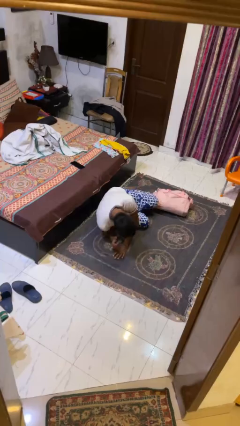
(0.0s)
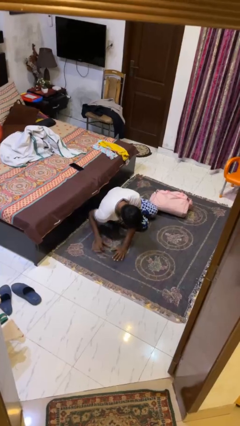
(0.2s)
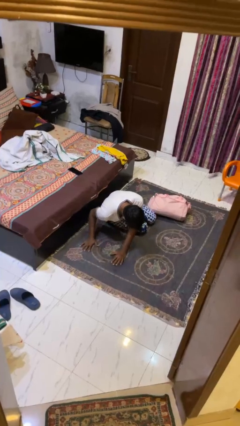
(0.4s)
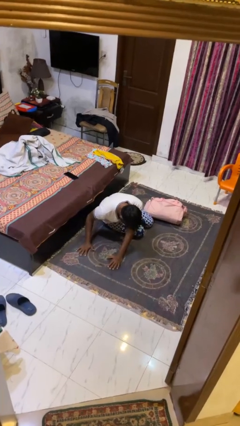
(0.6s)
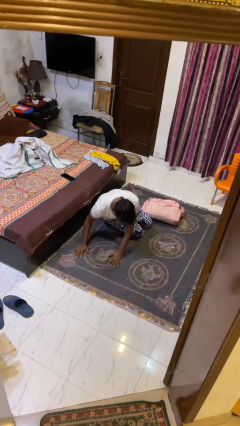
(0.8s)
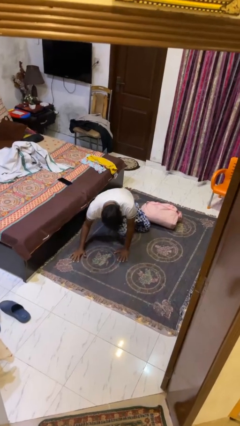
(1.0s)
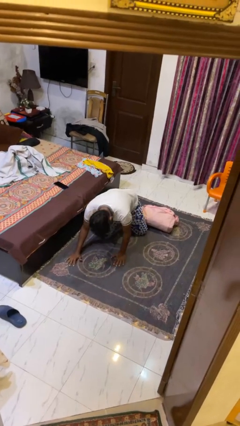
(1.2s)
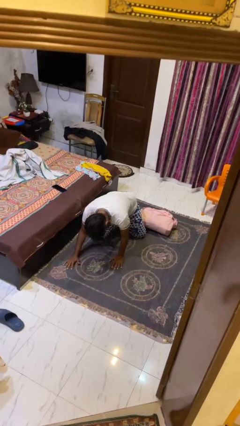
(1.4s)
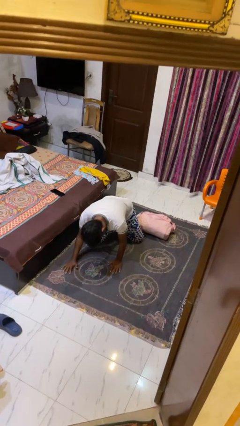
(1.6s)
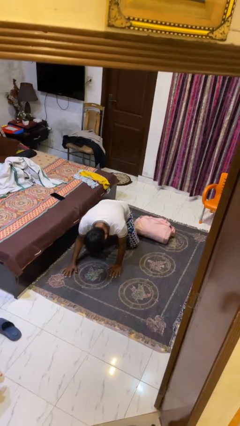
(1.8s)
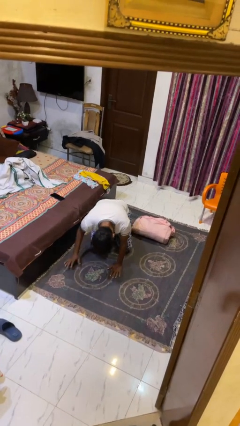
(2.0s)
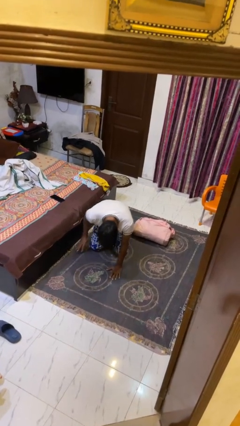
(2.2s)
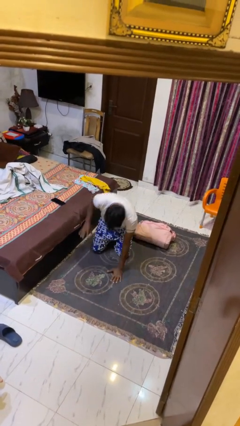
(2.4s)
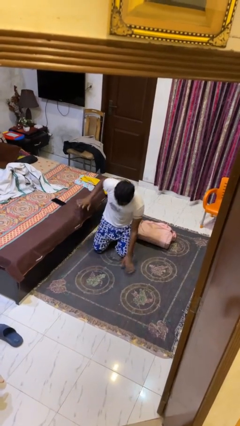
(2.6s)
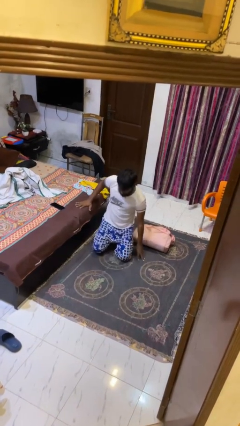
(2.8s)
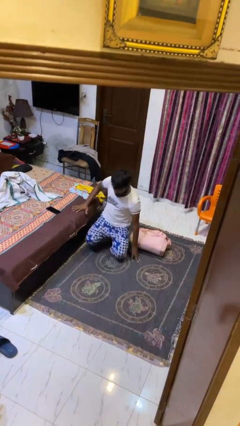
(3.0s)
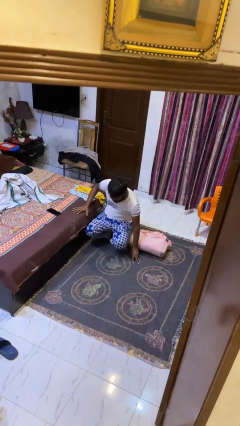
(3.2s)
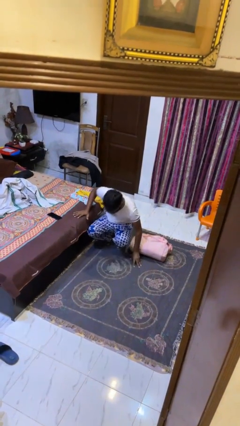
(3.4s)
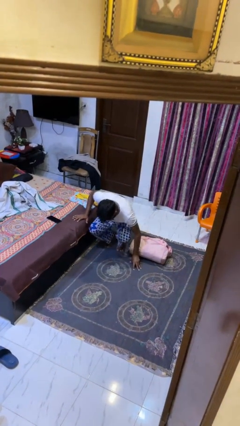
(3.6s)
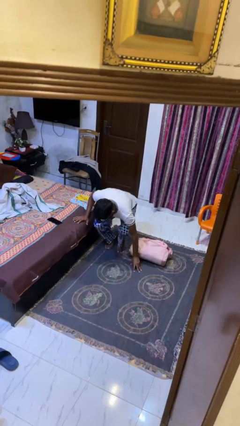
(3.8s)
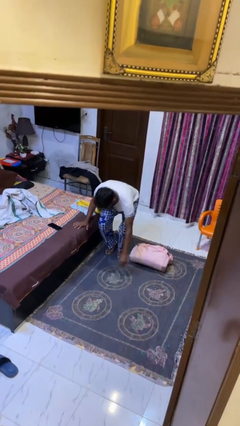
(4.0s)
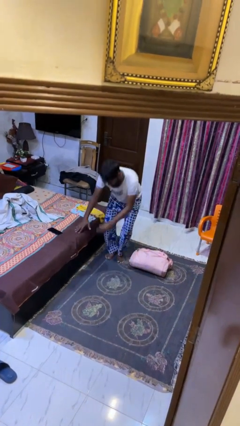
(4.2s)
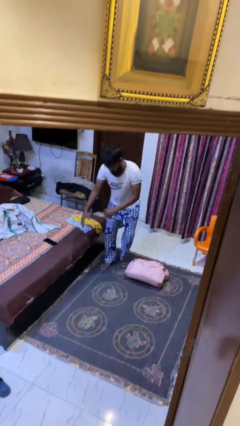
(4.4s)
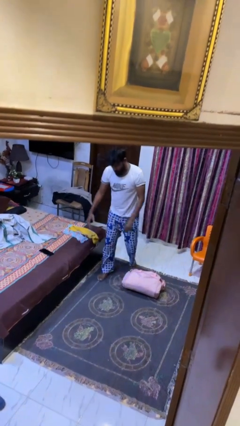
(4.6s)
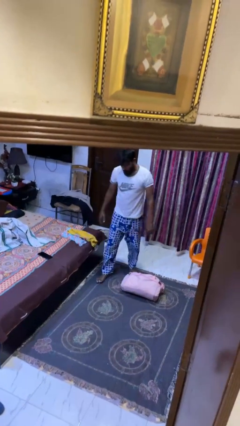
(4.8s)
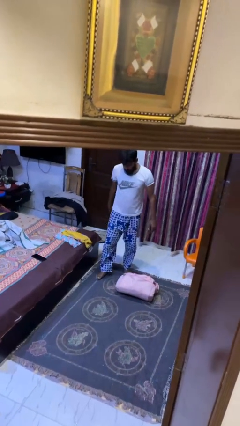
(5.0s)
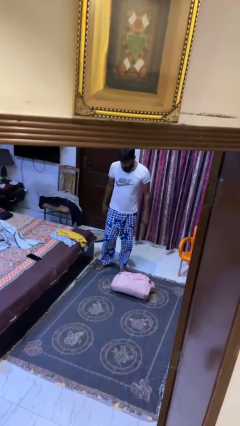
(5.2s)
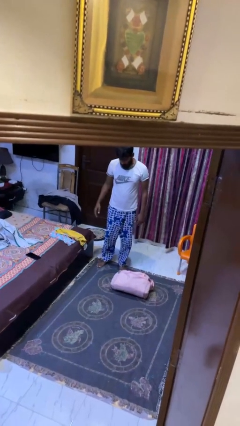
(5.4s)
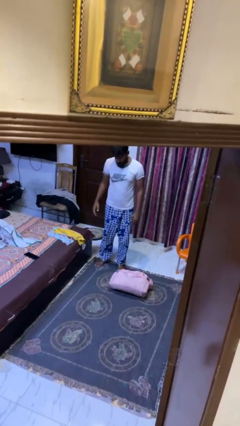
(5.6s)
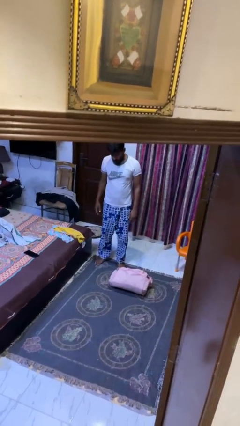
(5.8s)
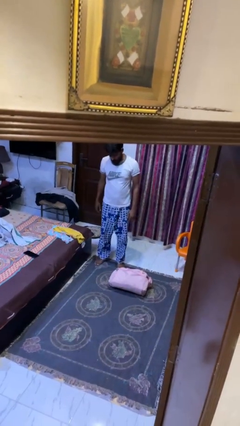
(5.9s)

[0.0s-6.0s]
person stands up from floor

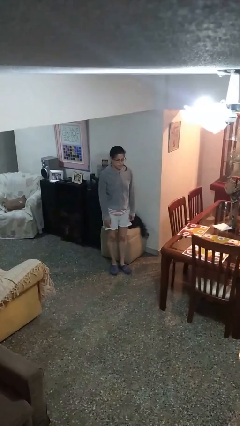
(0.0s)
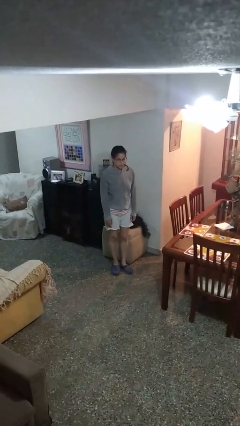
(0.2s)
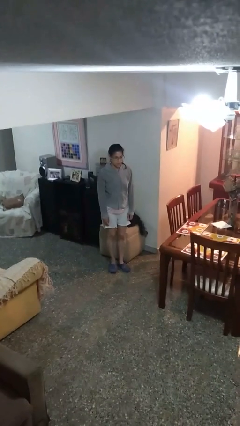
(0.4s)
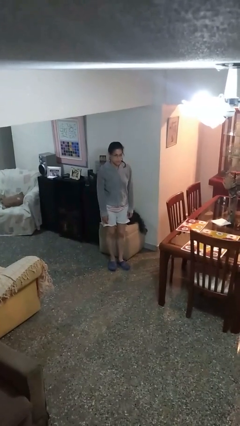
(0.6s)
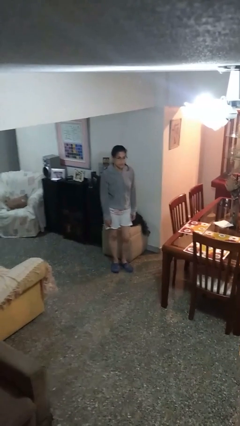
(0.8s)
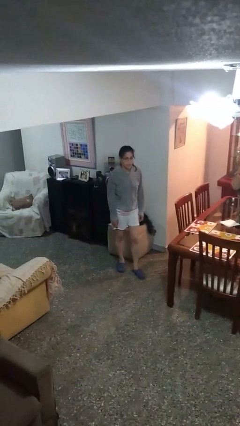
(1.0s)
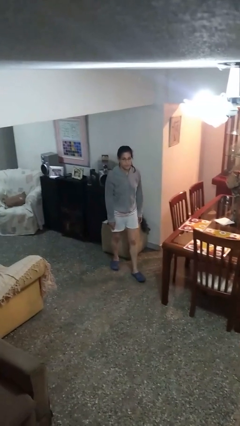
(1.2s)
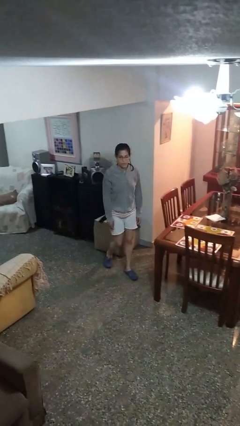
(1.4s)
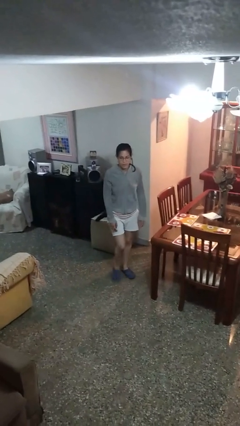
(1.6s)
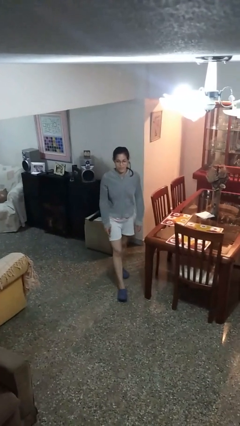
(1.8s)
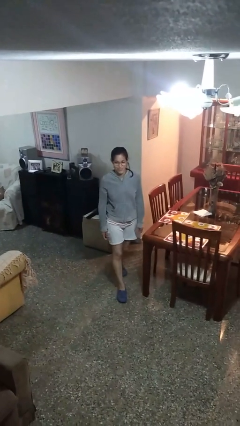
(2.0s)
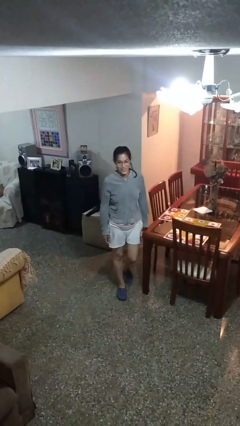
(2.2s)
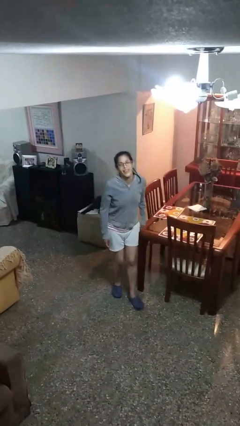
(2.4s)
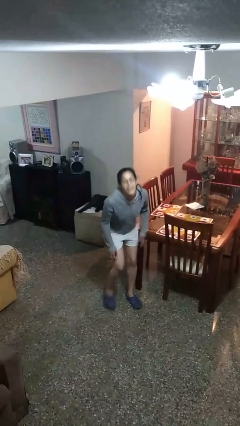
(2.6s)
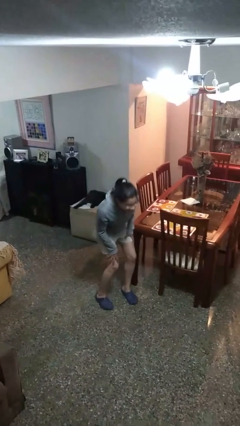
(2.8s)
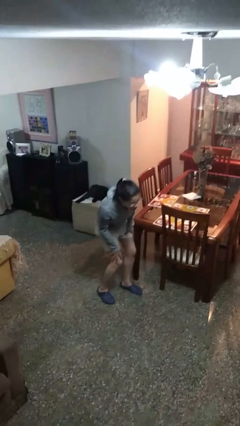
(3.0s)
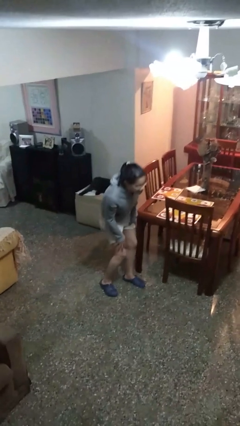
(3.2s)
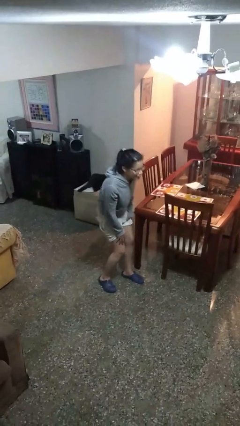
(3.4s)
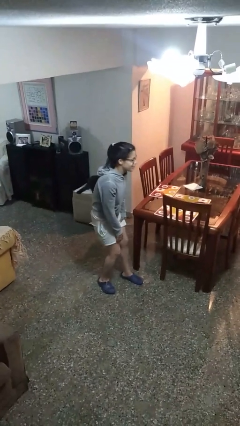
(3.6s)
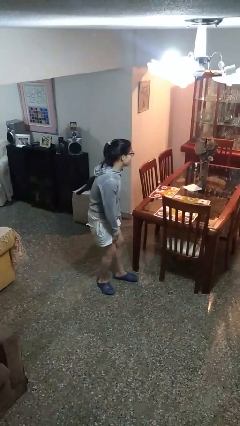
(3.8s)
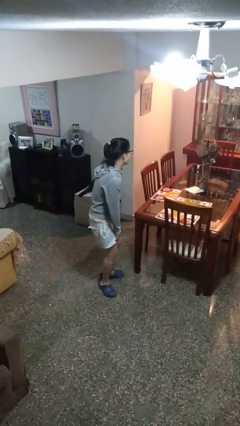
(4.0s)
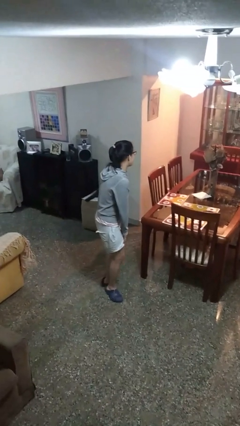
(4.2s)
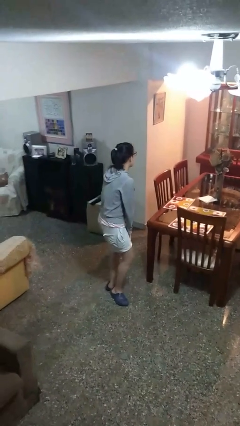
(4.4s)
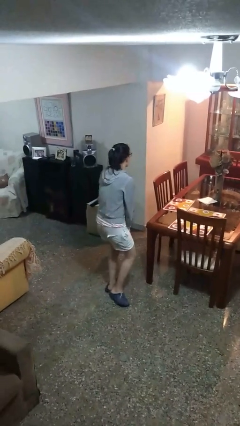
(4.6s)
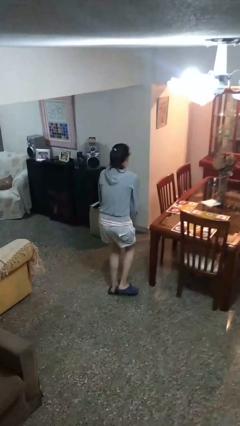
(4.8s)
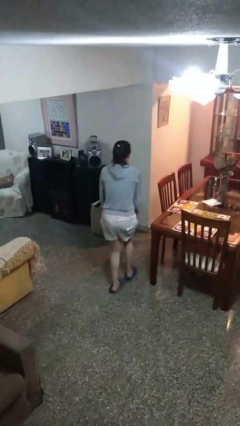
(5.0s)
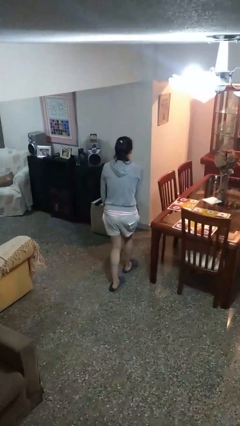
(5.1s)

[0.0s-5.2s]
person bumps into table

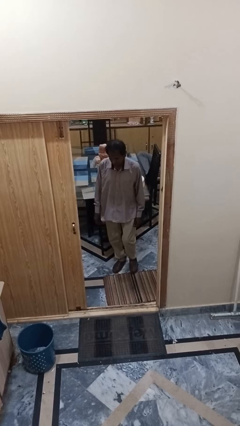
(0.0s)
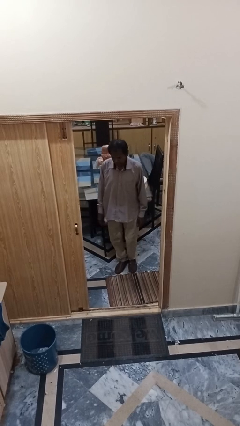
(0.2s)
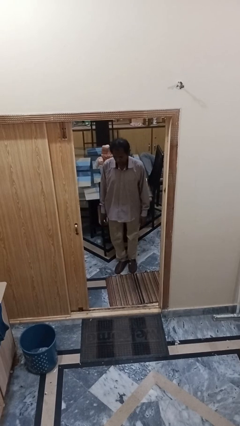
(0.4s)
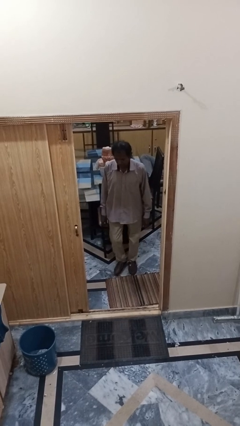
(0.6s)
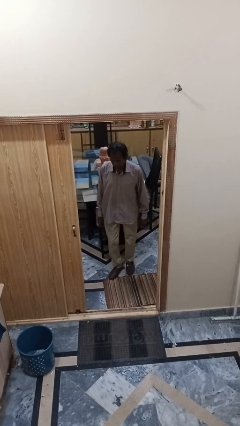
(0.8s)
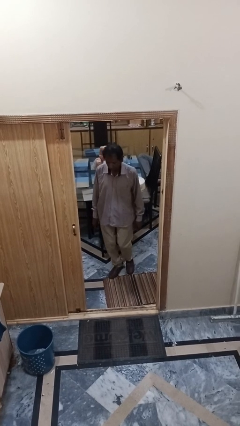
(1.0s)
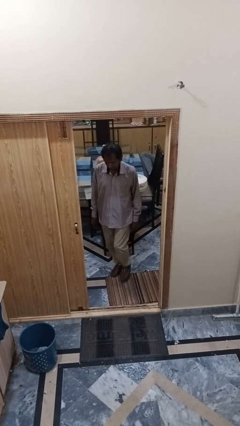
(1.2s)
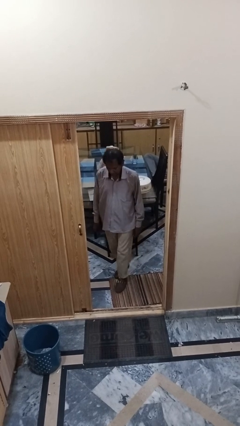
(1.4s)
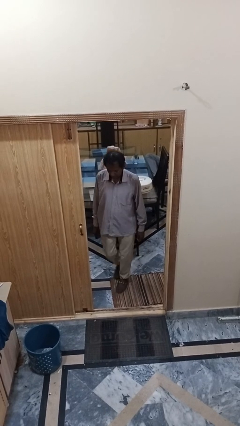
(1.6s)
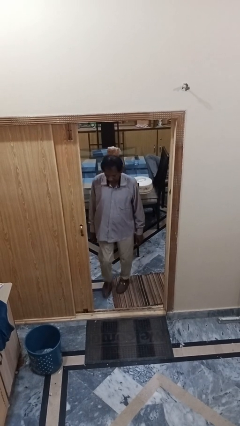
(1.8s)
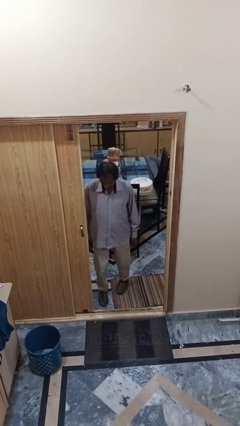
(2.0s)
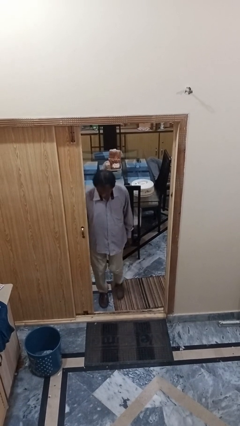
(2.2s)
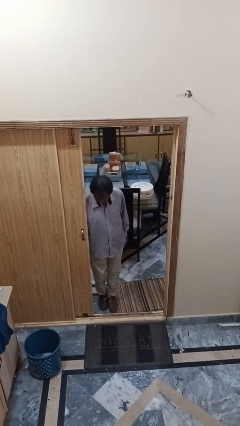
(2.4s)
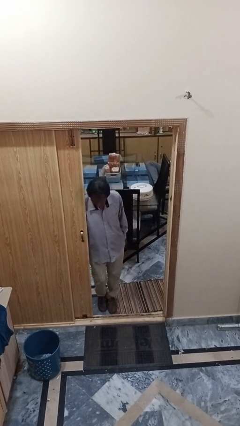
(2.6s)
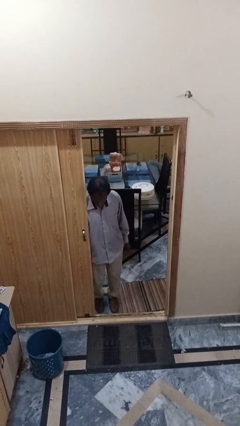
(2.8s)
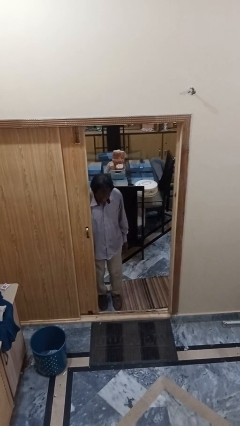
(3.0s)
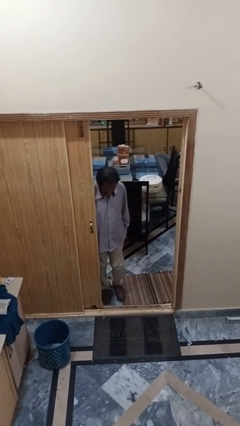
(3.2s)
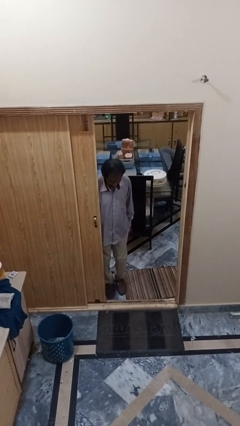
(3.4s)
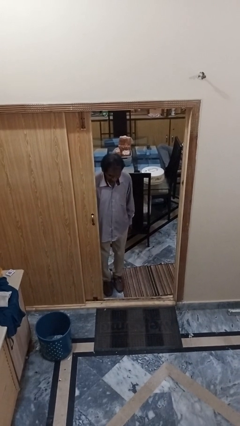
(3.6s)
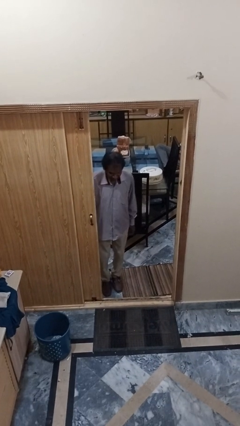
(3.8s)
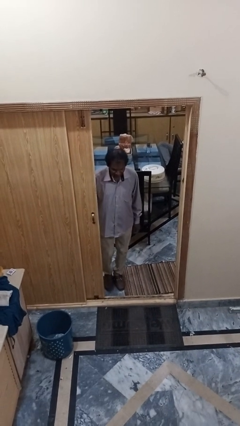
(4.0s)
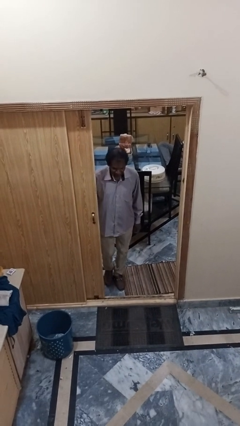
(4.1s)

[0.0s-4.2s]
person bumps into wall

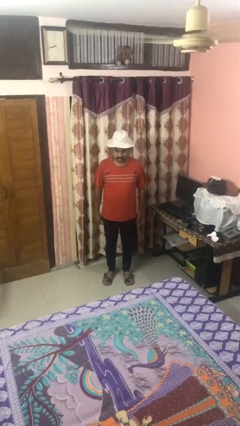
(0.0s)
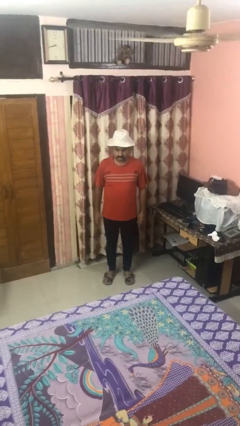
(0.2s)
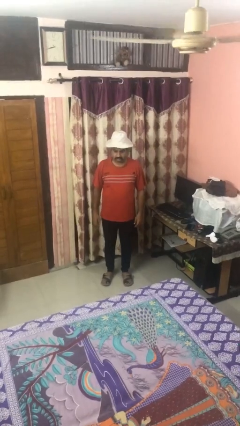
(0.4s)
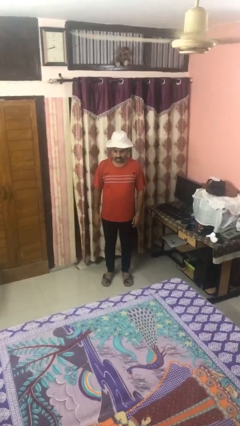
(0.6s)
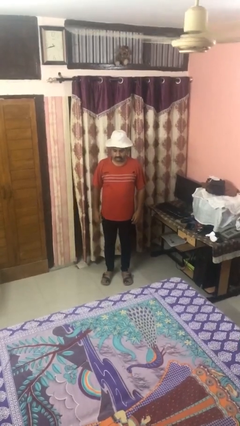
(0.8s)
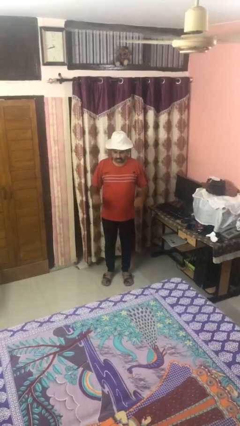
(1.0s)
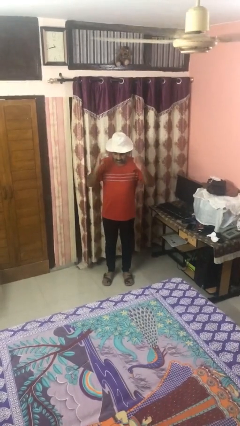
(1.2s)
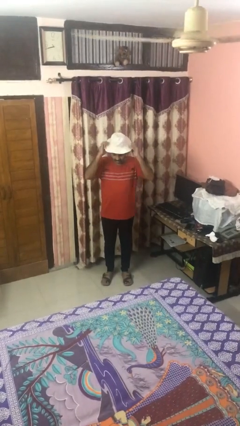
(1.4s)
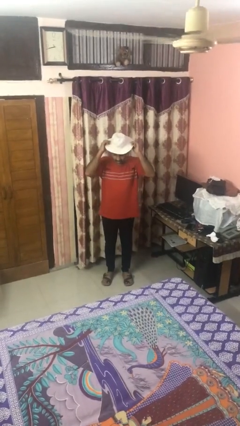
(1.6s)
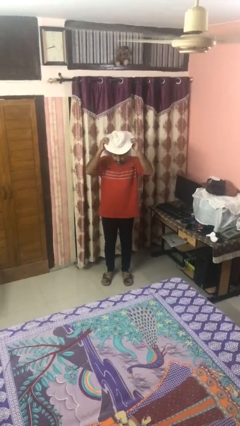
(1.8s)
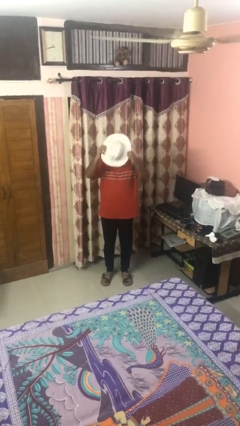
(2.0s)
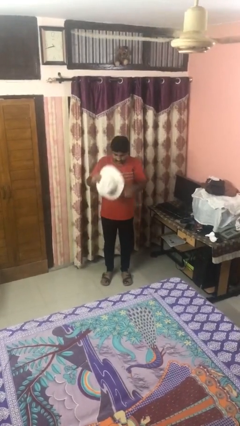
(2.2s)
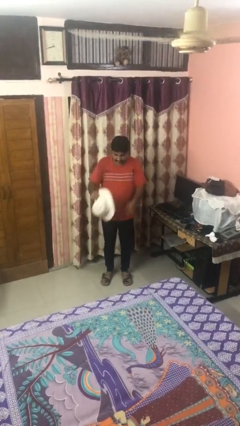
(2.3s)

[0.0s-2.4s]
person takes off hat
